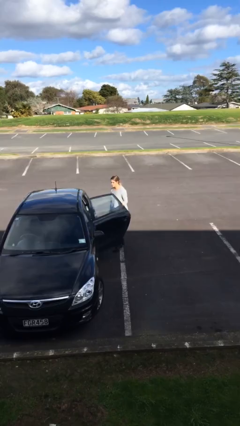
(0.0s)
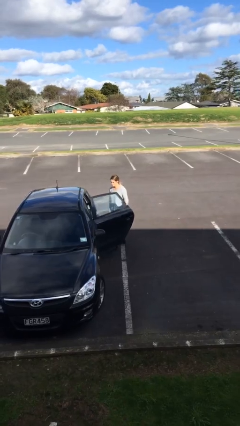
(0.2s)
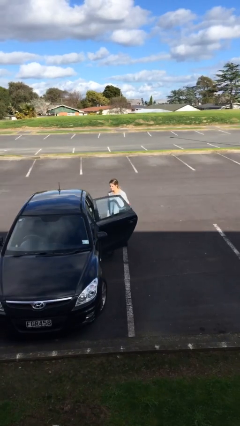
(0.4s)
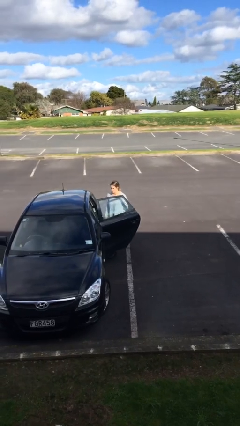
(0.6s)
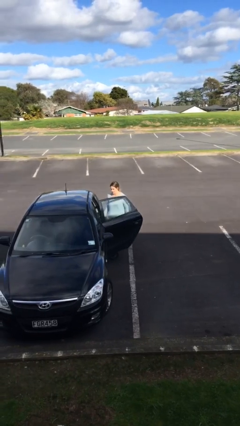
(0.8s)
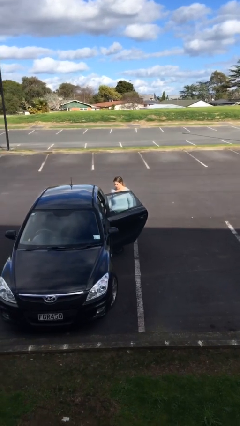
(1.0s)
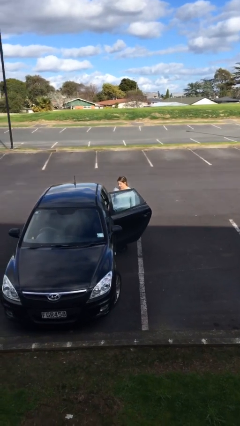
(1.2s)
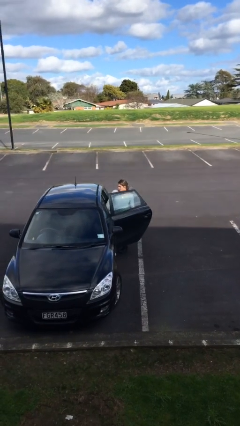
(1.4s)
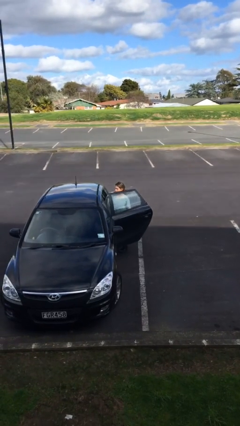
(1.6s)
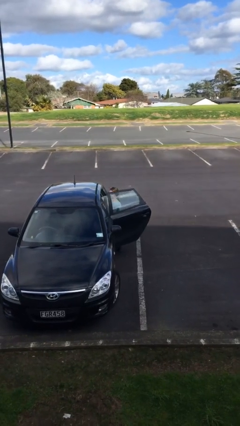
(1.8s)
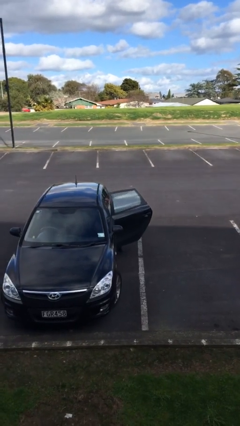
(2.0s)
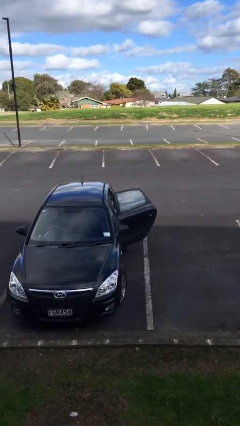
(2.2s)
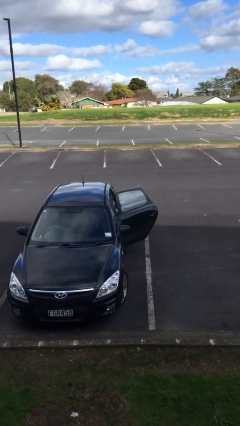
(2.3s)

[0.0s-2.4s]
person enters car

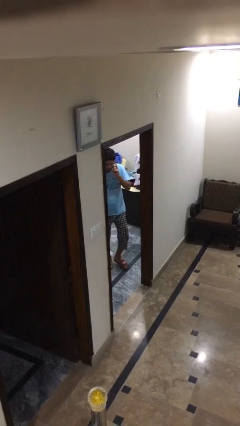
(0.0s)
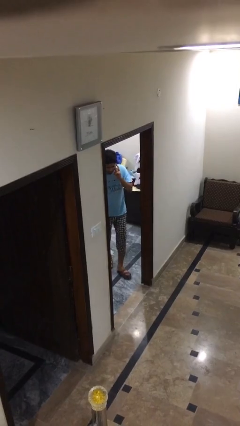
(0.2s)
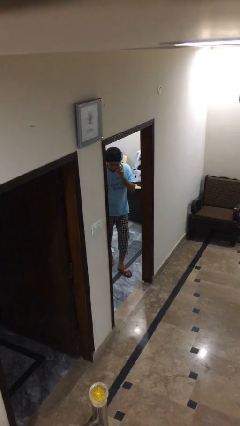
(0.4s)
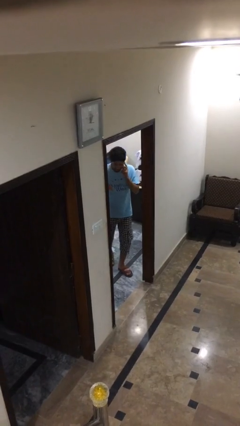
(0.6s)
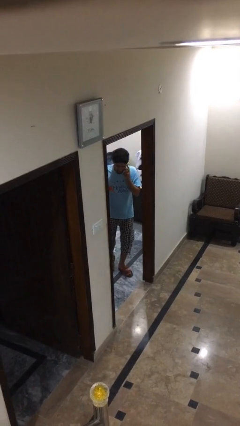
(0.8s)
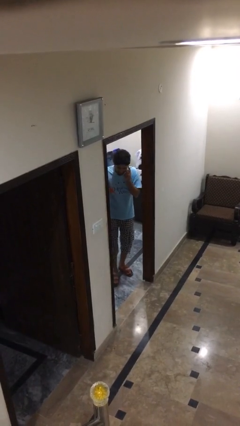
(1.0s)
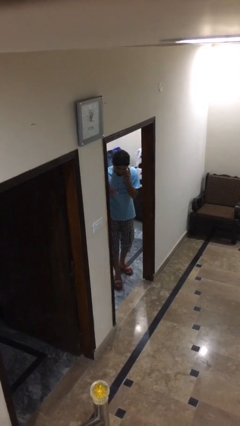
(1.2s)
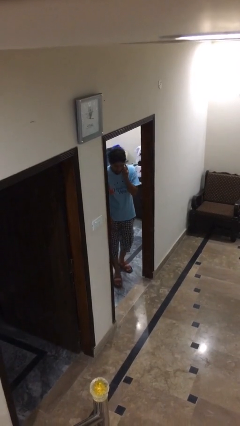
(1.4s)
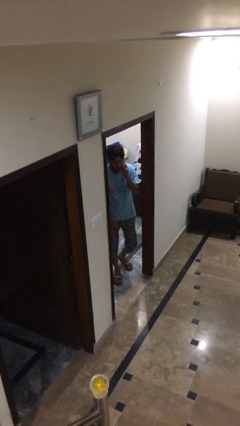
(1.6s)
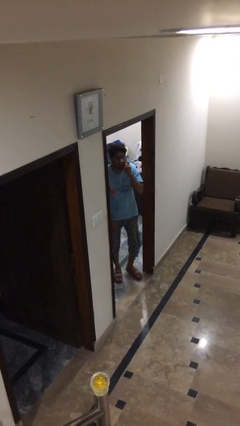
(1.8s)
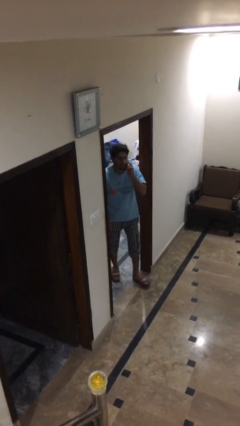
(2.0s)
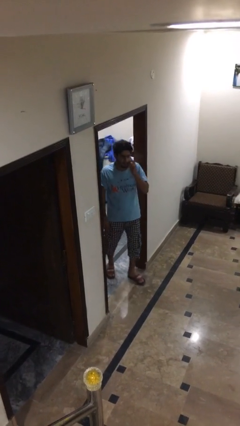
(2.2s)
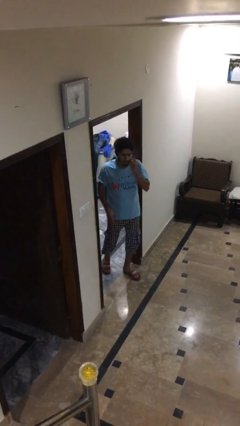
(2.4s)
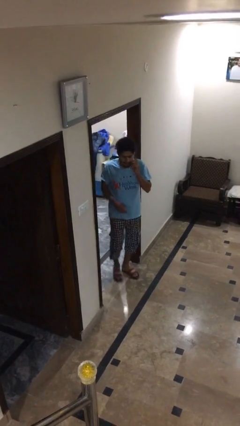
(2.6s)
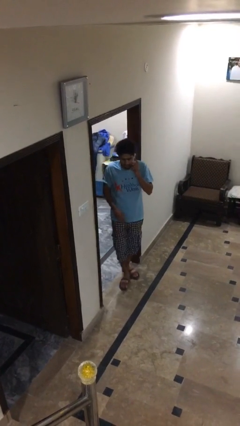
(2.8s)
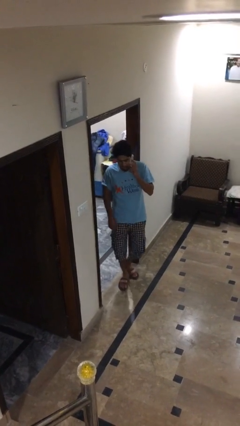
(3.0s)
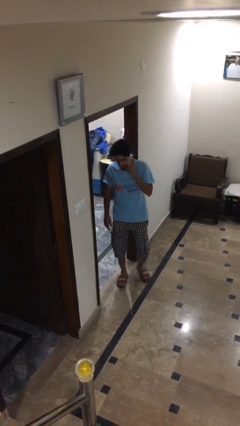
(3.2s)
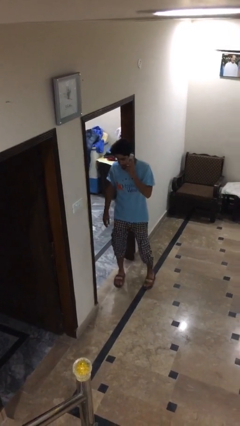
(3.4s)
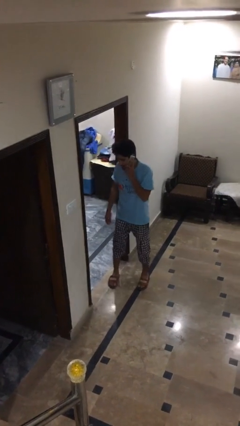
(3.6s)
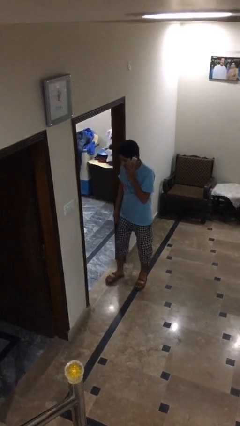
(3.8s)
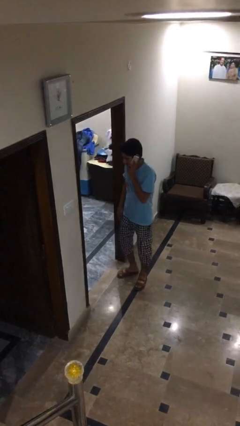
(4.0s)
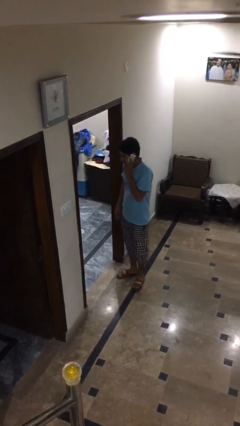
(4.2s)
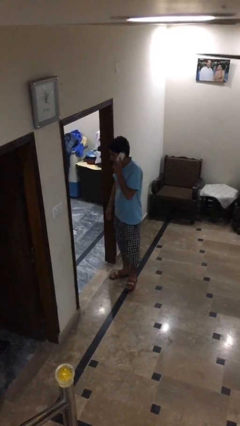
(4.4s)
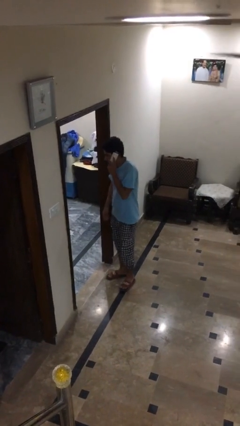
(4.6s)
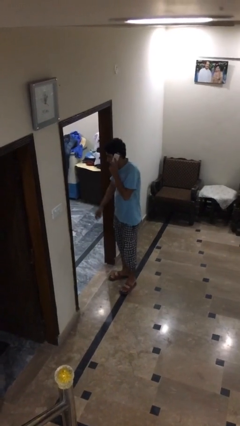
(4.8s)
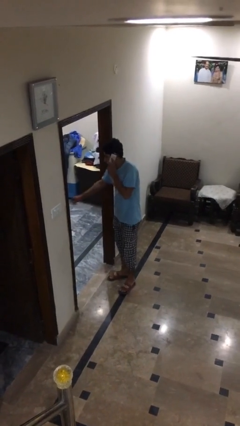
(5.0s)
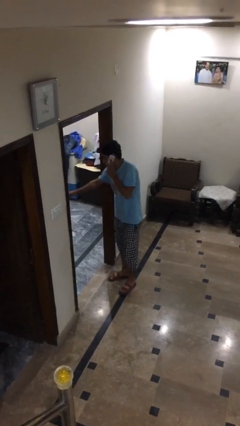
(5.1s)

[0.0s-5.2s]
person enters scene through structure

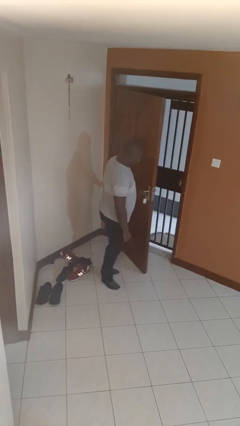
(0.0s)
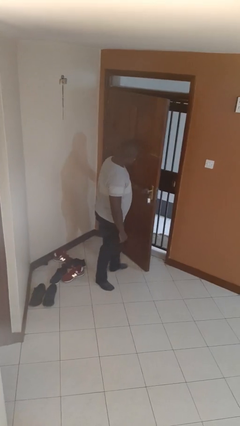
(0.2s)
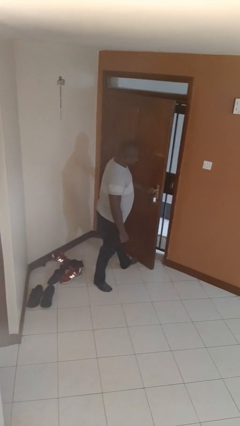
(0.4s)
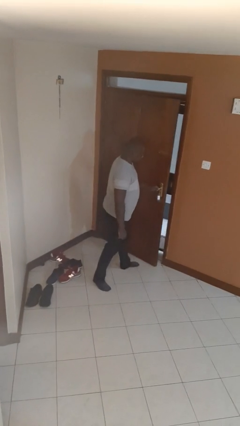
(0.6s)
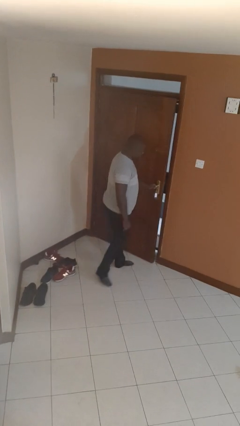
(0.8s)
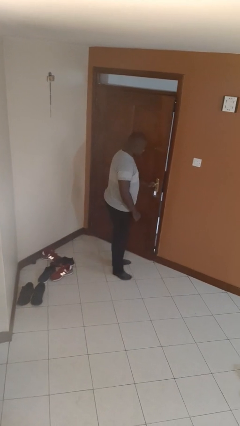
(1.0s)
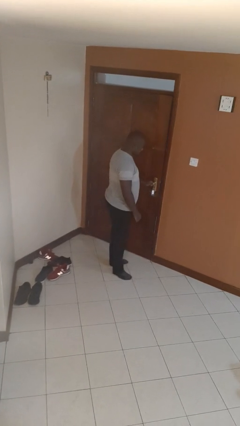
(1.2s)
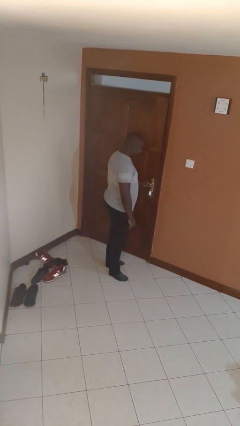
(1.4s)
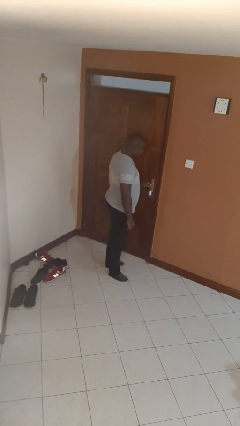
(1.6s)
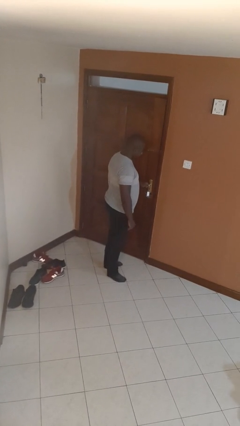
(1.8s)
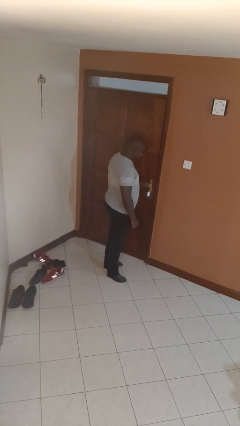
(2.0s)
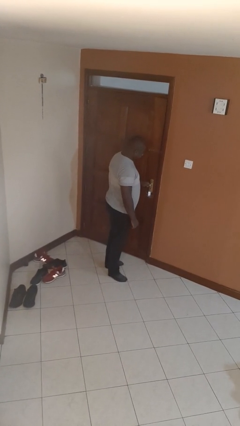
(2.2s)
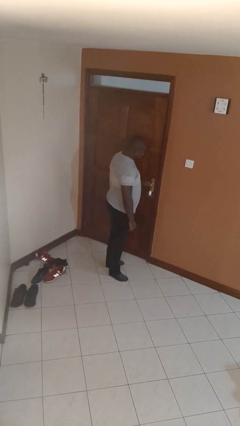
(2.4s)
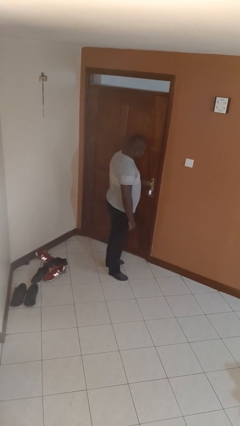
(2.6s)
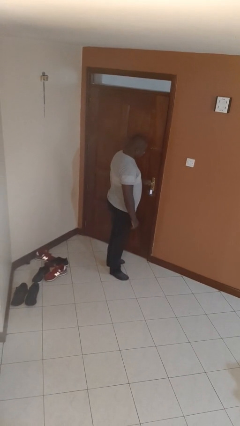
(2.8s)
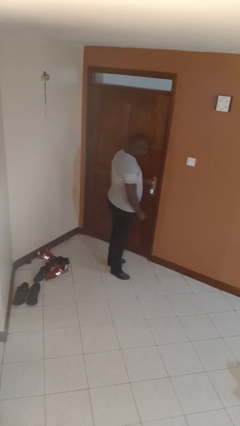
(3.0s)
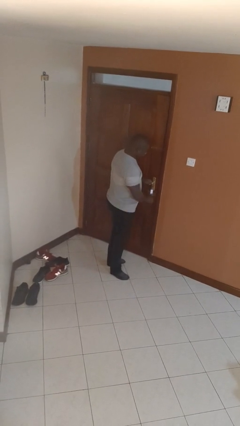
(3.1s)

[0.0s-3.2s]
person closes facility door

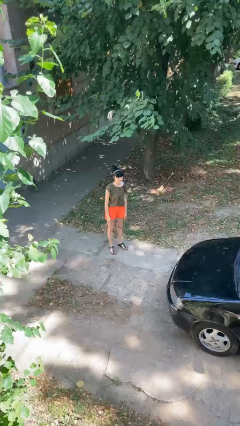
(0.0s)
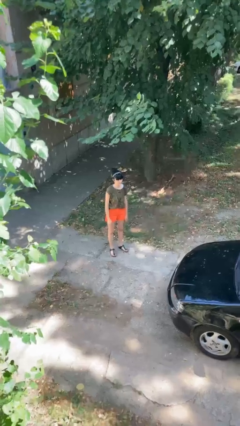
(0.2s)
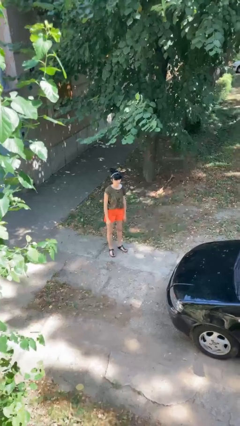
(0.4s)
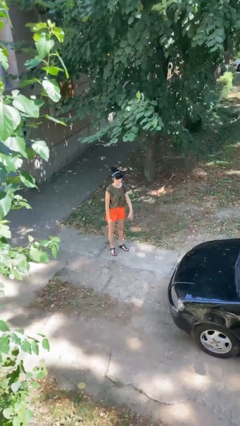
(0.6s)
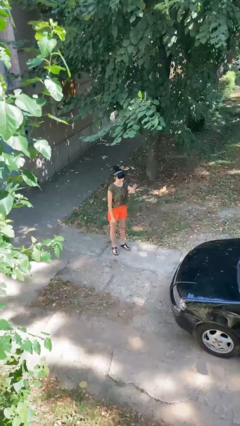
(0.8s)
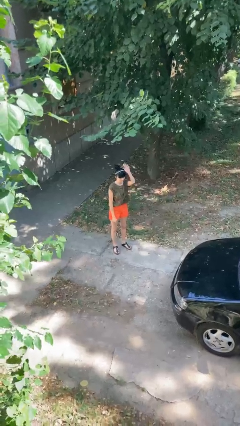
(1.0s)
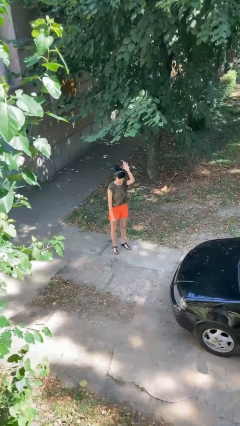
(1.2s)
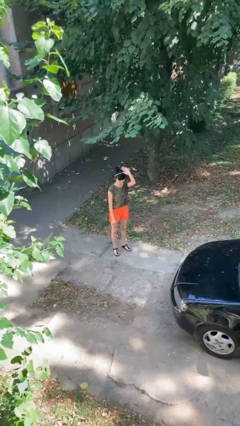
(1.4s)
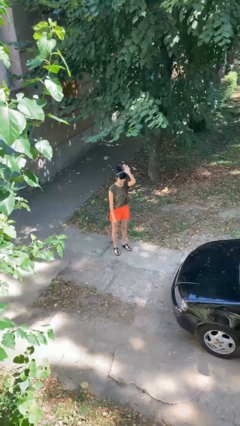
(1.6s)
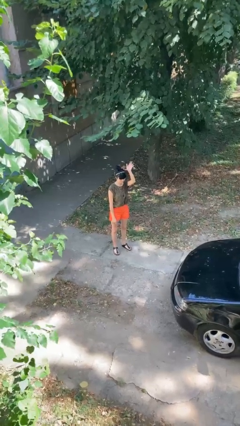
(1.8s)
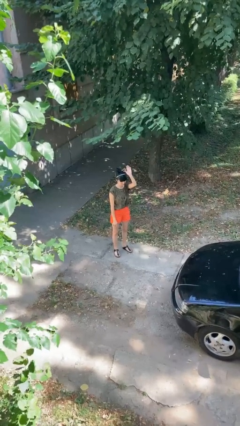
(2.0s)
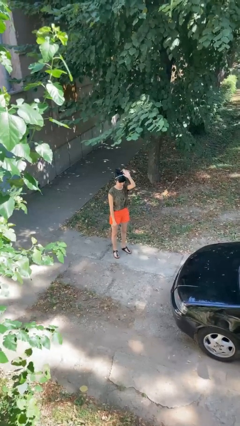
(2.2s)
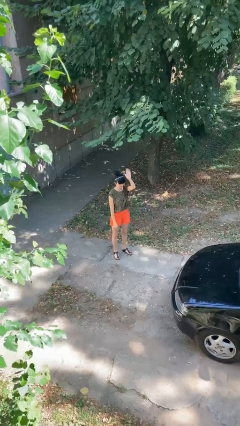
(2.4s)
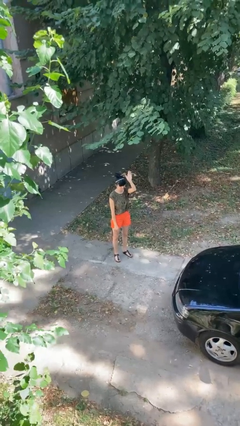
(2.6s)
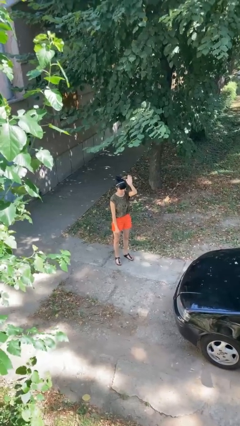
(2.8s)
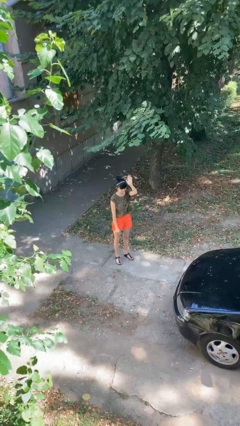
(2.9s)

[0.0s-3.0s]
person waves at person

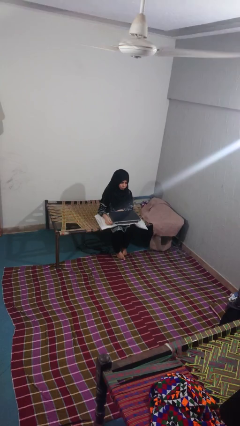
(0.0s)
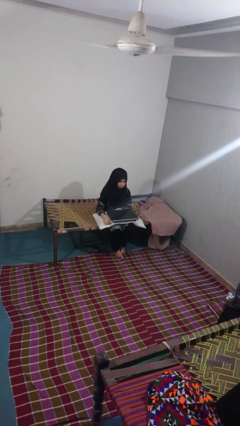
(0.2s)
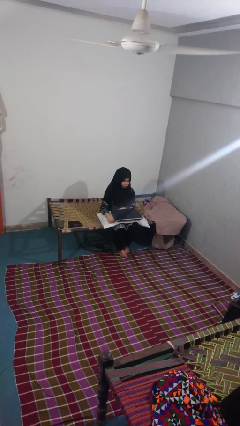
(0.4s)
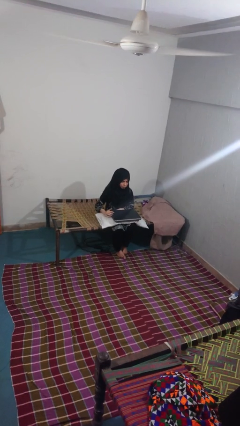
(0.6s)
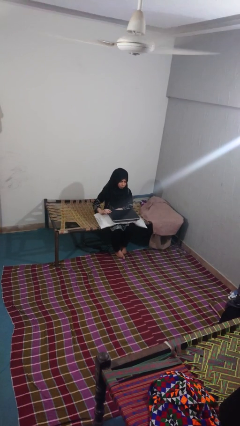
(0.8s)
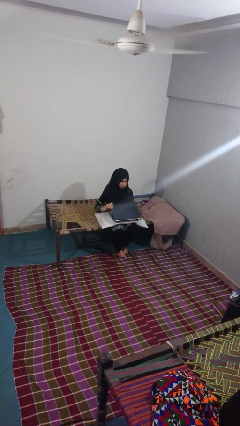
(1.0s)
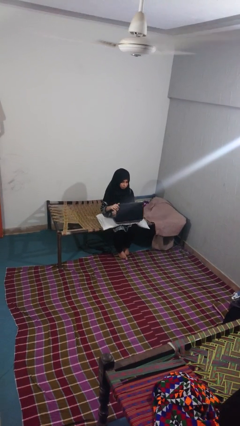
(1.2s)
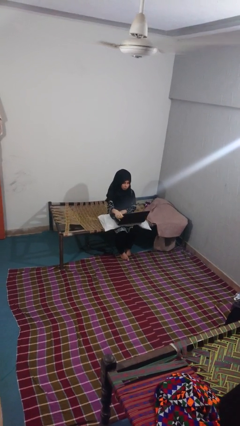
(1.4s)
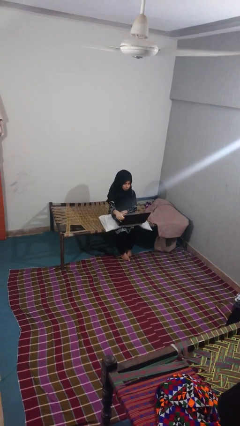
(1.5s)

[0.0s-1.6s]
person opens laptop

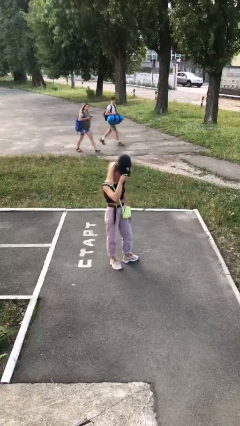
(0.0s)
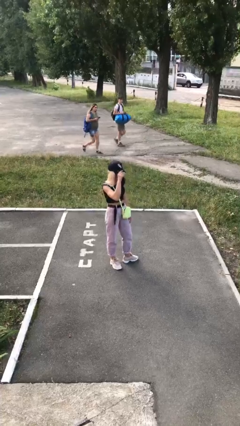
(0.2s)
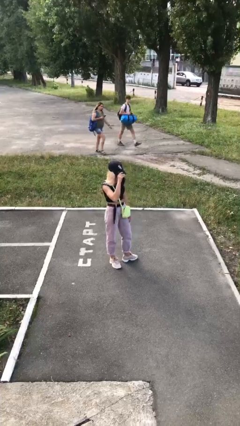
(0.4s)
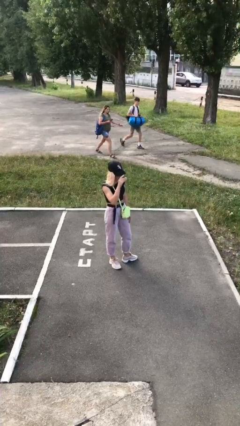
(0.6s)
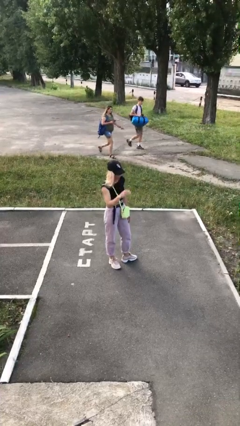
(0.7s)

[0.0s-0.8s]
person puts on hat

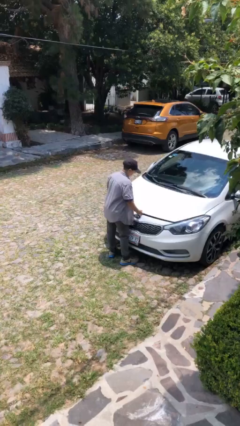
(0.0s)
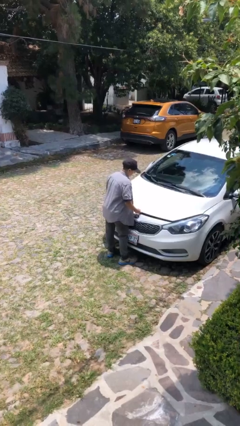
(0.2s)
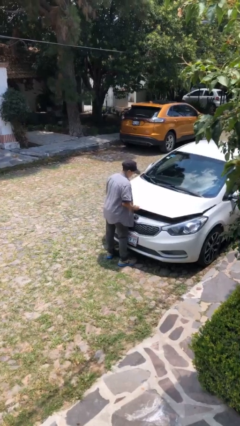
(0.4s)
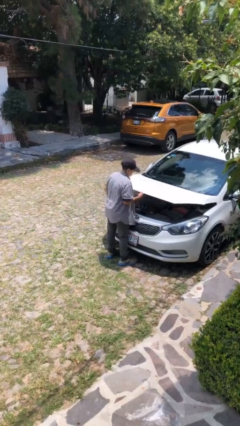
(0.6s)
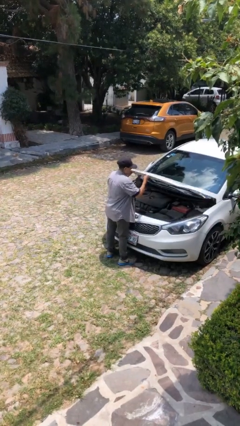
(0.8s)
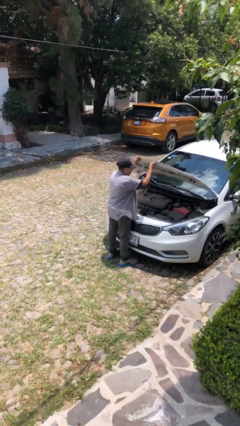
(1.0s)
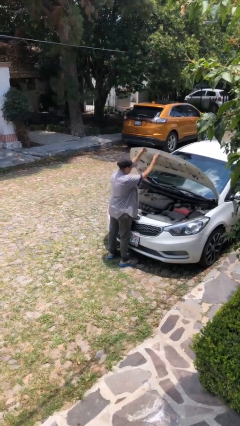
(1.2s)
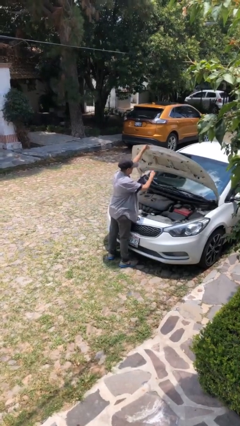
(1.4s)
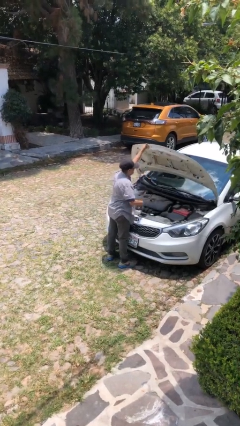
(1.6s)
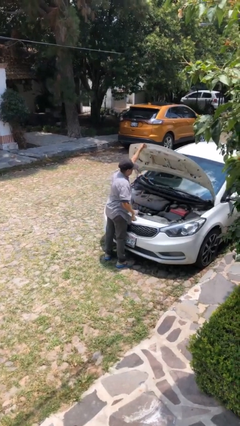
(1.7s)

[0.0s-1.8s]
person opens car hood
